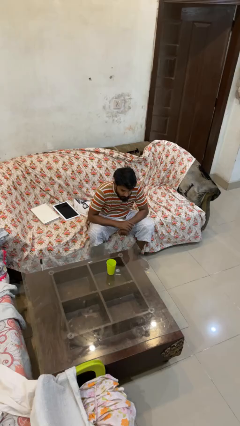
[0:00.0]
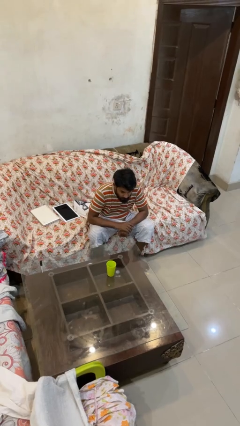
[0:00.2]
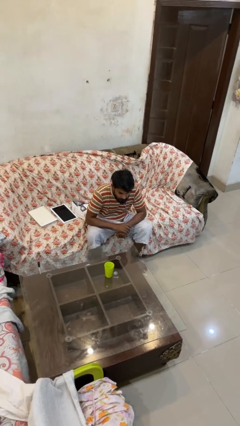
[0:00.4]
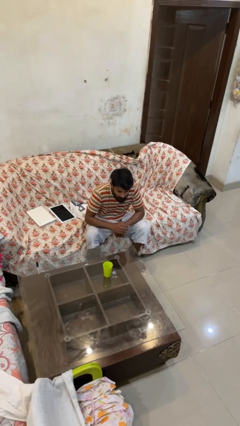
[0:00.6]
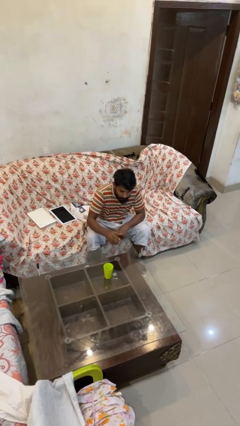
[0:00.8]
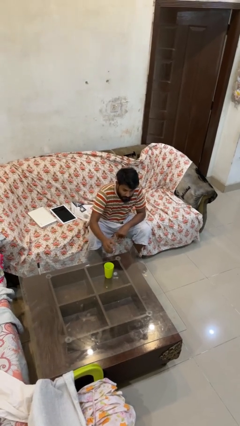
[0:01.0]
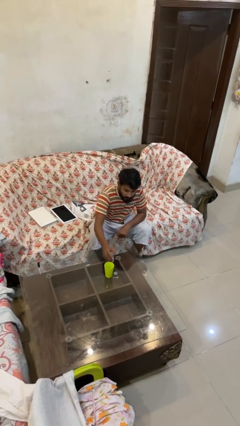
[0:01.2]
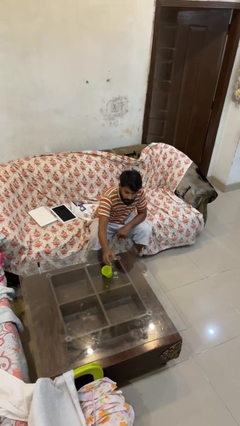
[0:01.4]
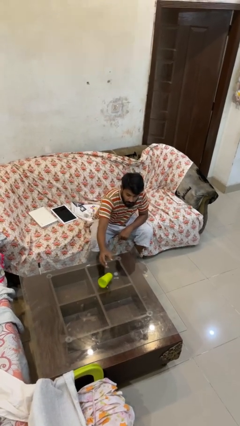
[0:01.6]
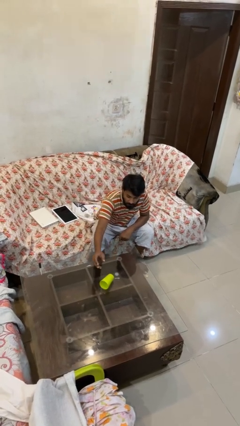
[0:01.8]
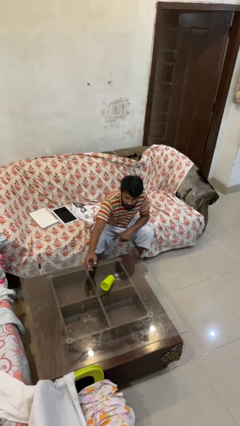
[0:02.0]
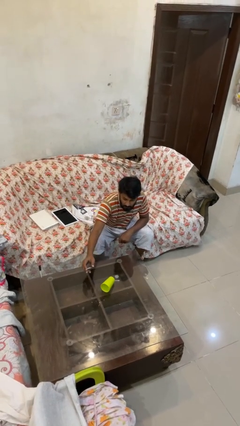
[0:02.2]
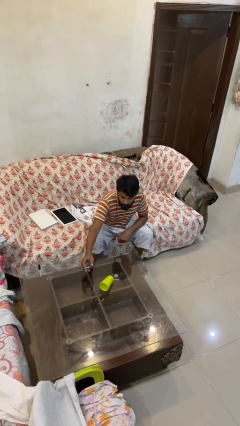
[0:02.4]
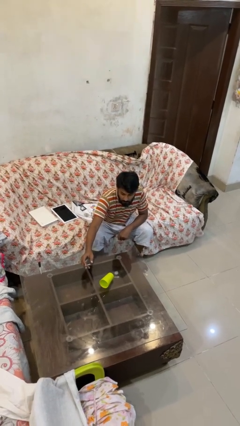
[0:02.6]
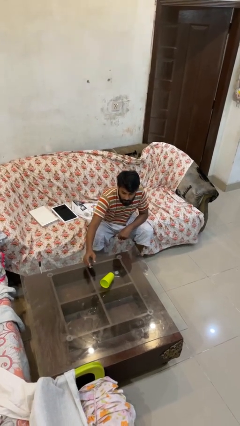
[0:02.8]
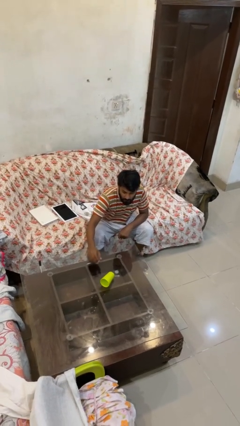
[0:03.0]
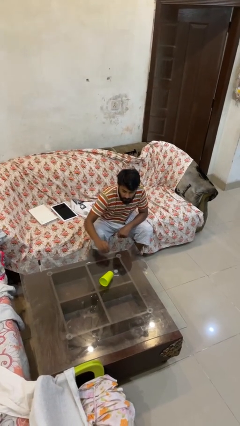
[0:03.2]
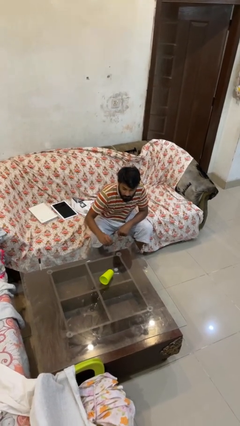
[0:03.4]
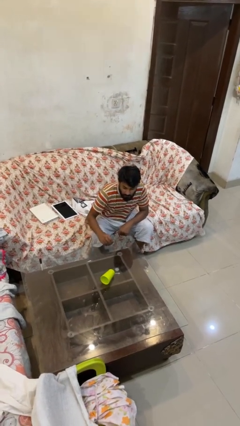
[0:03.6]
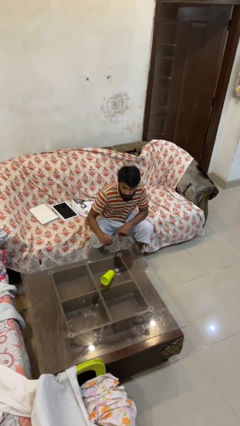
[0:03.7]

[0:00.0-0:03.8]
person spills on table

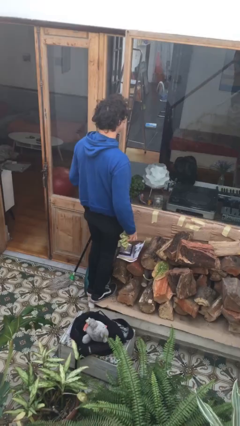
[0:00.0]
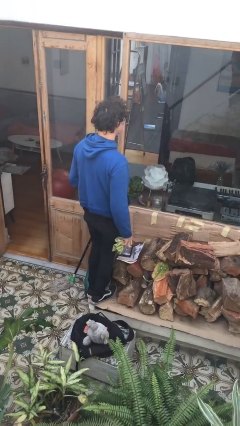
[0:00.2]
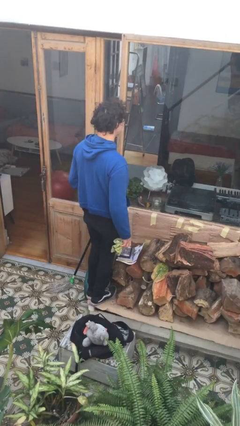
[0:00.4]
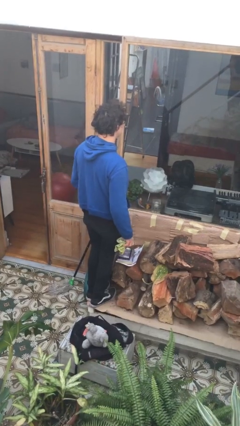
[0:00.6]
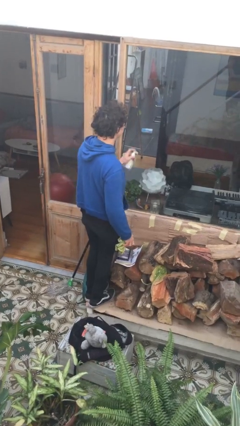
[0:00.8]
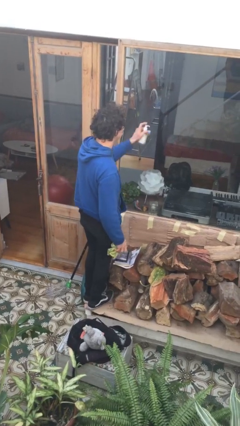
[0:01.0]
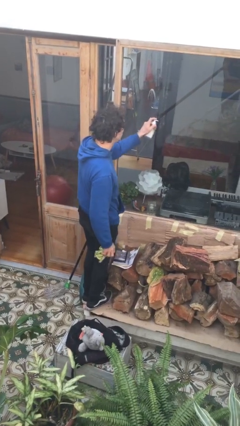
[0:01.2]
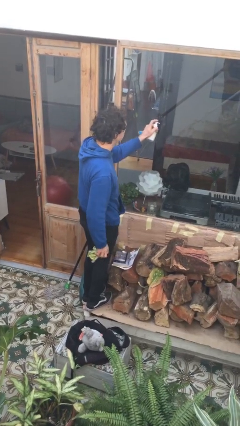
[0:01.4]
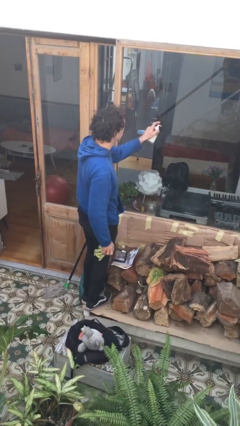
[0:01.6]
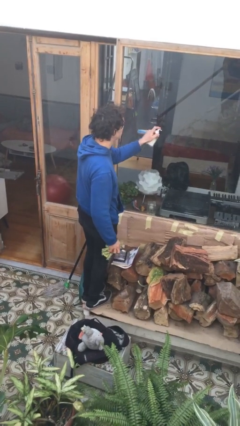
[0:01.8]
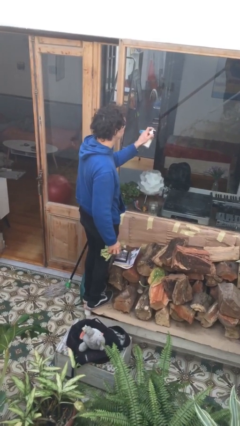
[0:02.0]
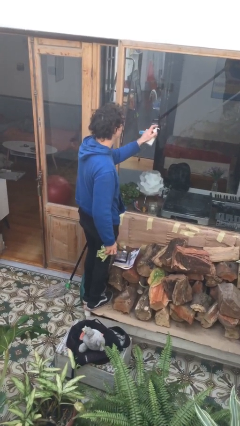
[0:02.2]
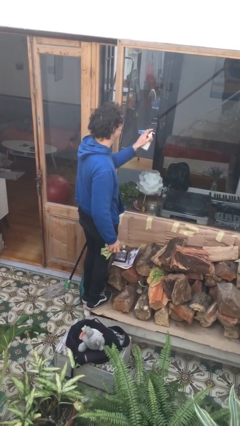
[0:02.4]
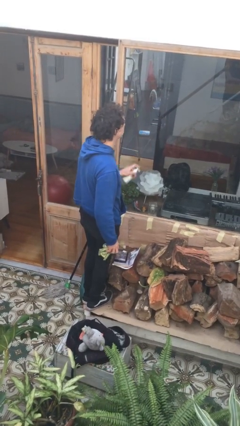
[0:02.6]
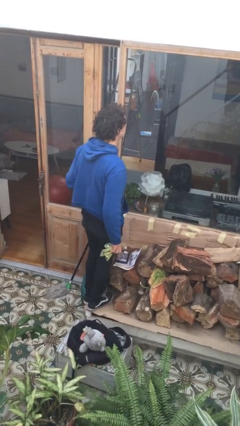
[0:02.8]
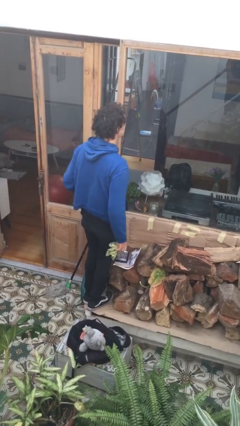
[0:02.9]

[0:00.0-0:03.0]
person sprays from bottle

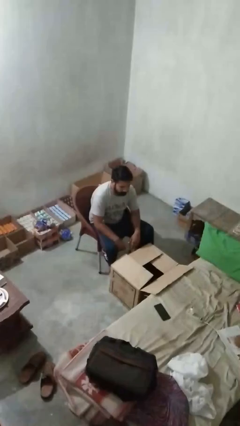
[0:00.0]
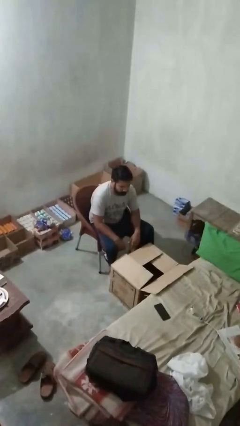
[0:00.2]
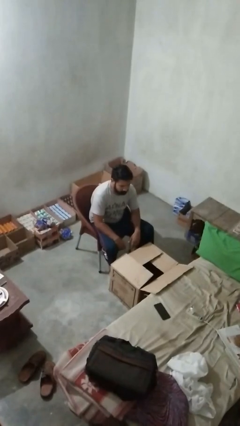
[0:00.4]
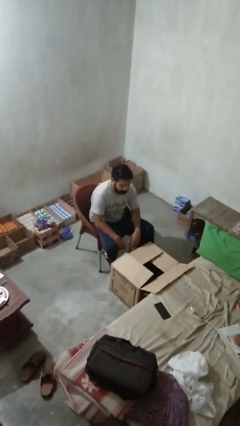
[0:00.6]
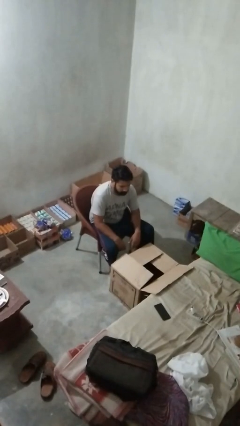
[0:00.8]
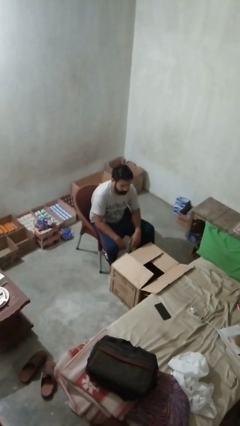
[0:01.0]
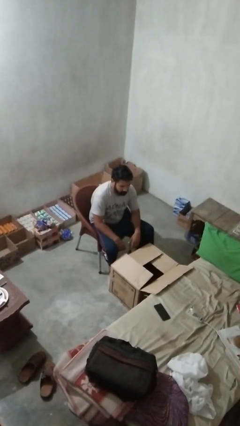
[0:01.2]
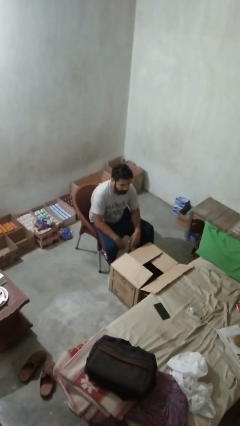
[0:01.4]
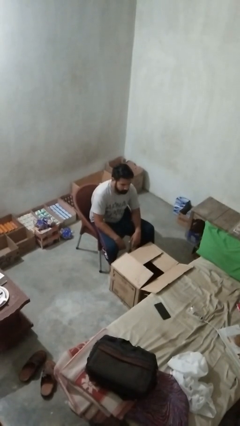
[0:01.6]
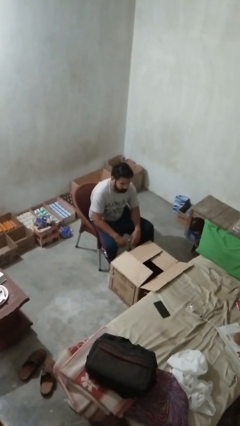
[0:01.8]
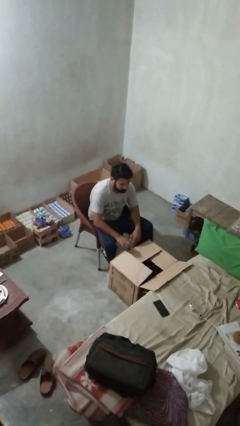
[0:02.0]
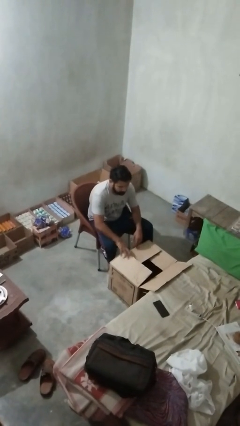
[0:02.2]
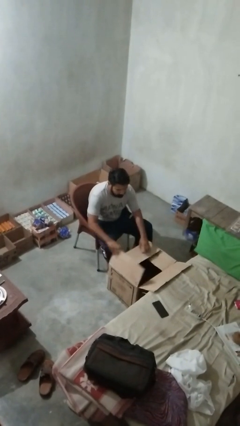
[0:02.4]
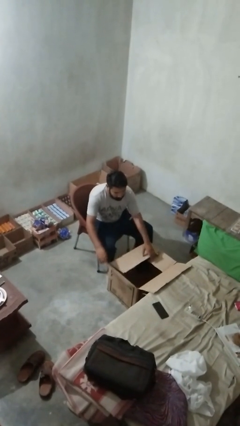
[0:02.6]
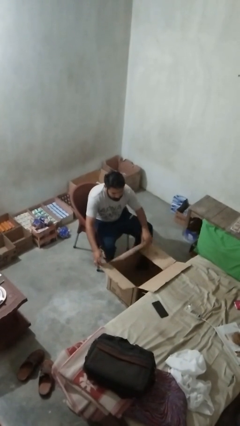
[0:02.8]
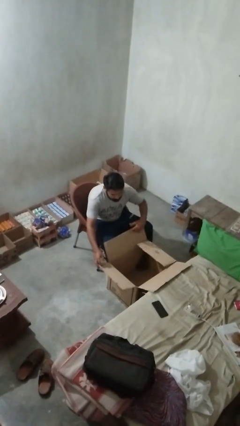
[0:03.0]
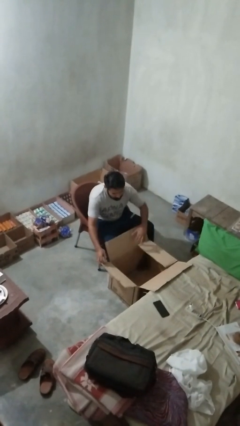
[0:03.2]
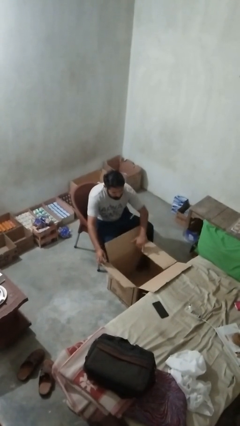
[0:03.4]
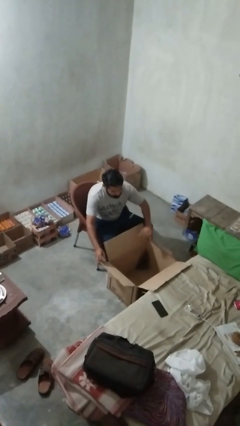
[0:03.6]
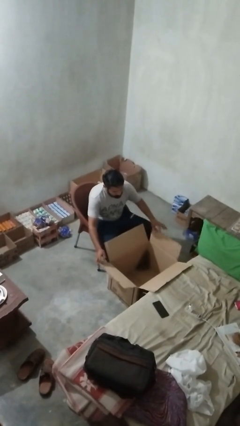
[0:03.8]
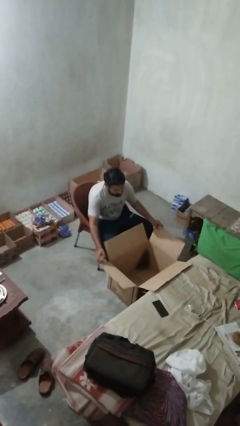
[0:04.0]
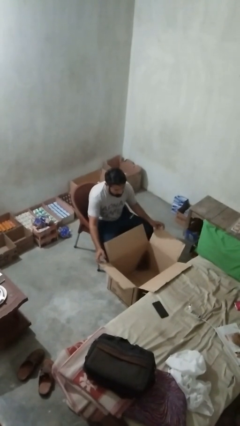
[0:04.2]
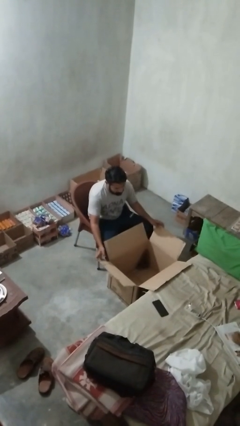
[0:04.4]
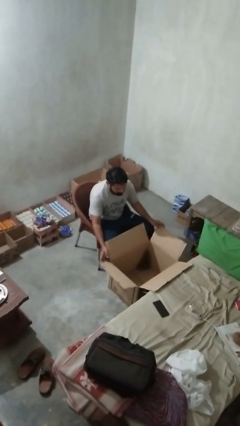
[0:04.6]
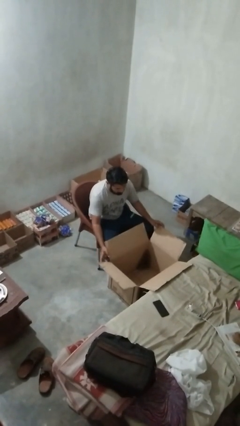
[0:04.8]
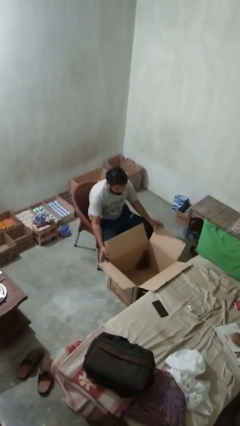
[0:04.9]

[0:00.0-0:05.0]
person opens box

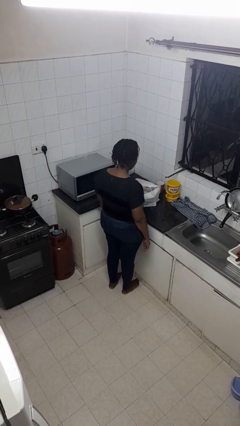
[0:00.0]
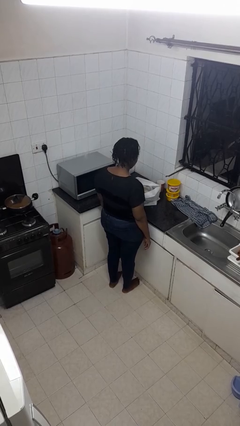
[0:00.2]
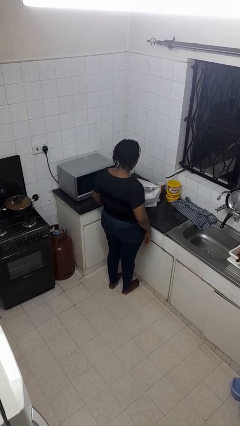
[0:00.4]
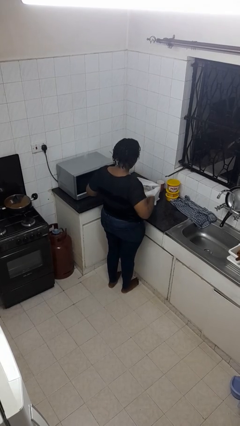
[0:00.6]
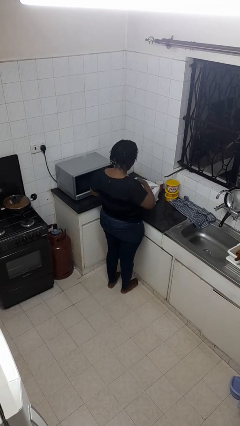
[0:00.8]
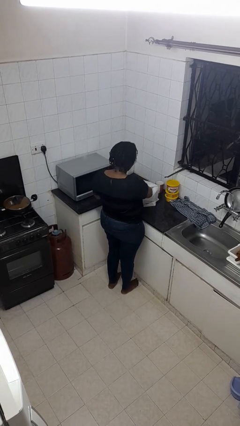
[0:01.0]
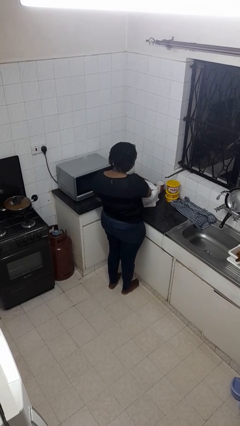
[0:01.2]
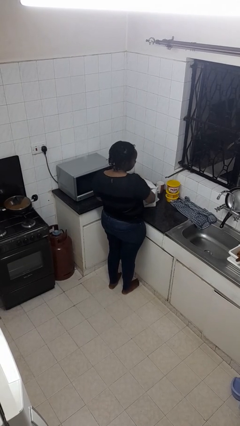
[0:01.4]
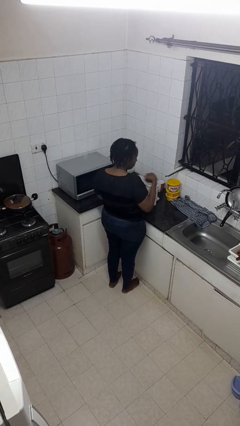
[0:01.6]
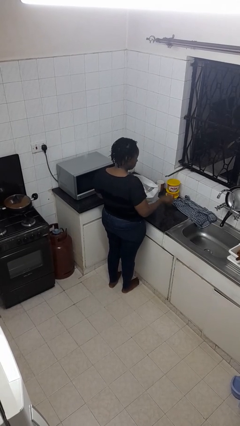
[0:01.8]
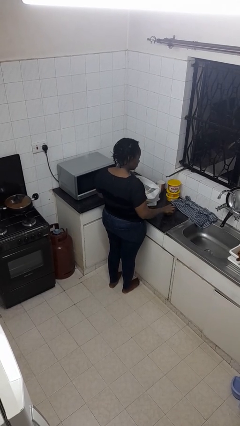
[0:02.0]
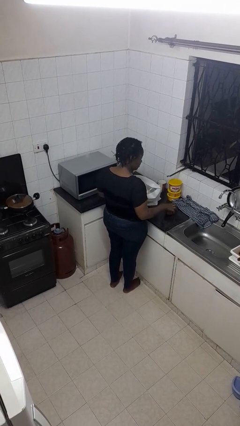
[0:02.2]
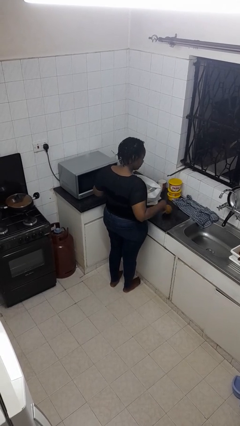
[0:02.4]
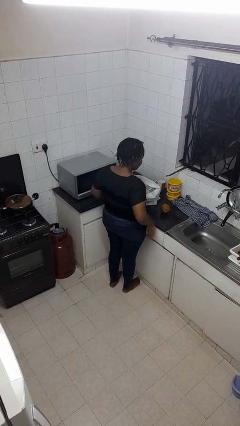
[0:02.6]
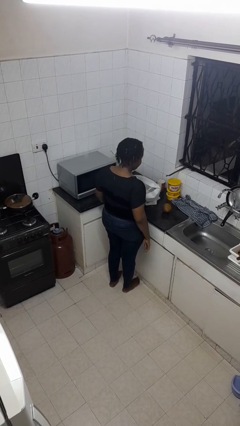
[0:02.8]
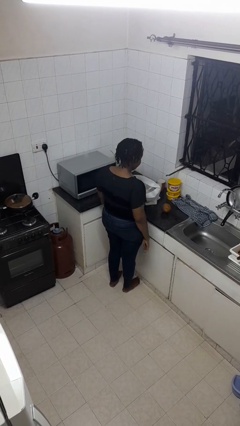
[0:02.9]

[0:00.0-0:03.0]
person takes object from bag

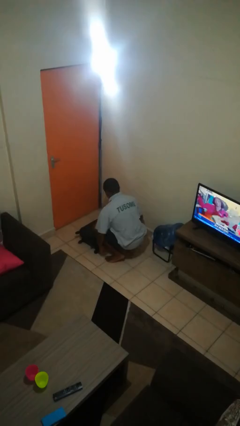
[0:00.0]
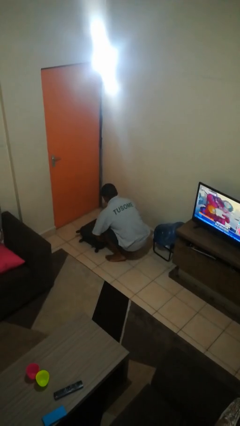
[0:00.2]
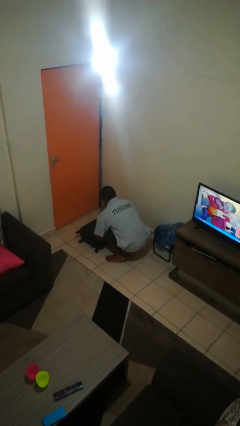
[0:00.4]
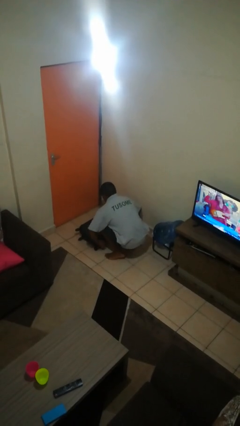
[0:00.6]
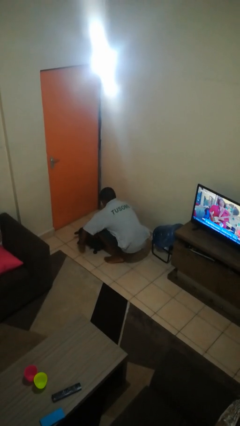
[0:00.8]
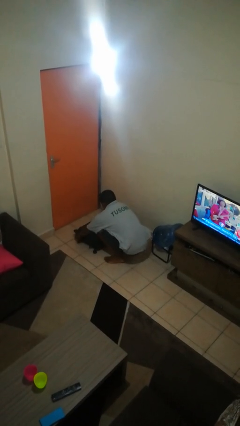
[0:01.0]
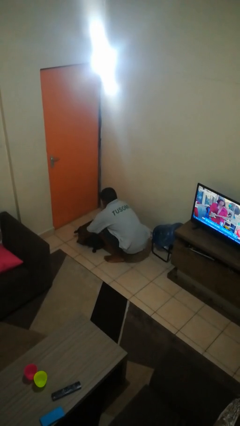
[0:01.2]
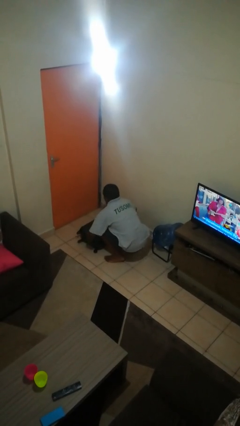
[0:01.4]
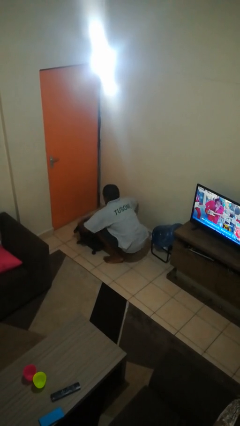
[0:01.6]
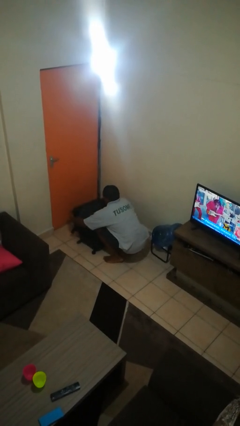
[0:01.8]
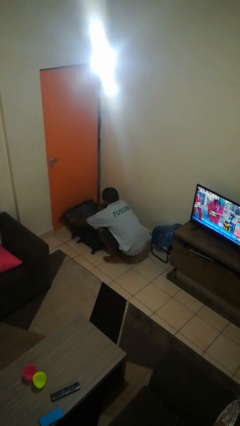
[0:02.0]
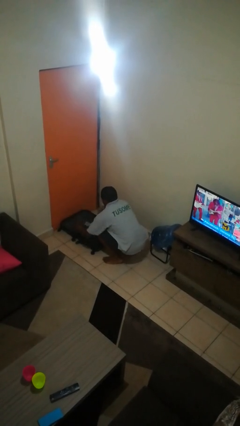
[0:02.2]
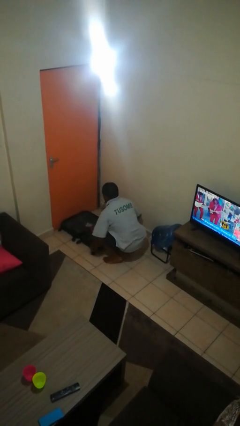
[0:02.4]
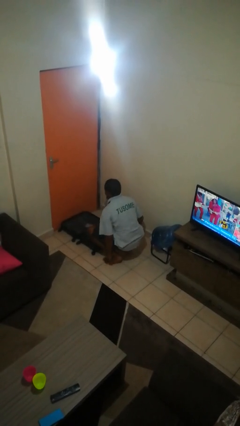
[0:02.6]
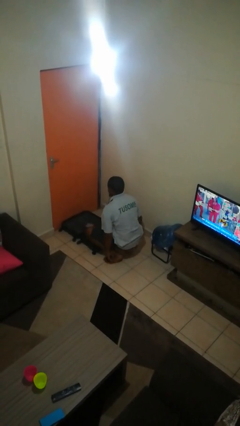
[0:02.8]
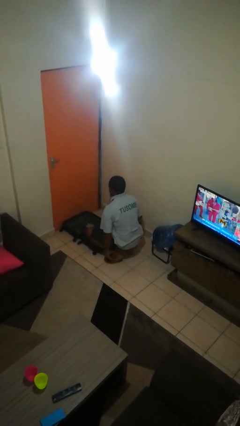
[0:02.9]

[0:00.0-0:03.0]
person opens suitcase

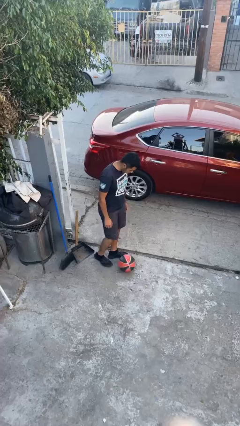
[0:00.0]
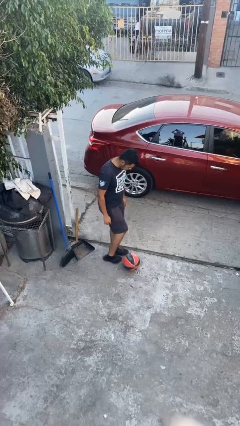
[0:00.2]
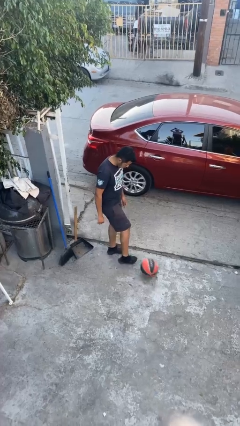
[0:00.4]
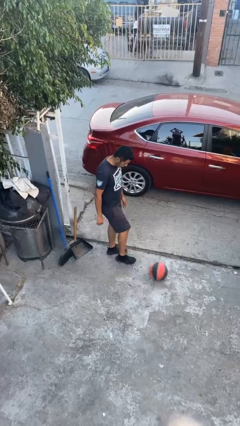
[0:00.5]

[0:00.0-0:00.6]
person kicks object to person
